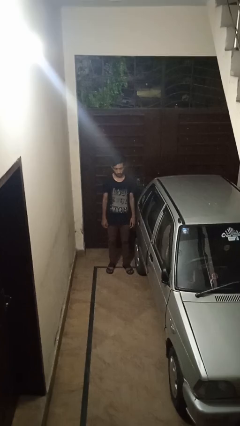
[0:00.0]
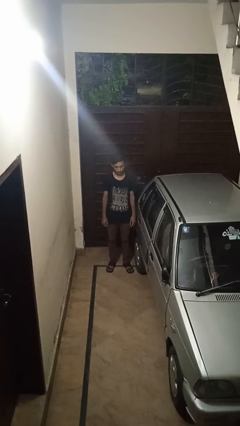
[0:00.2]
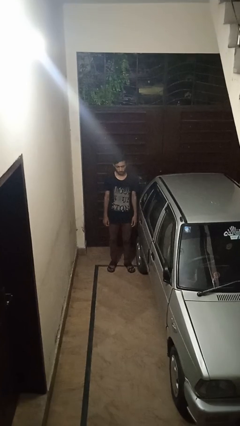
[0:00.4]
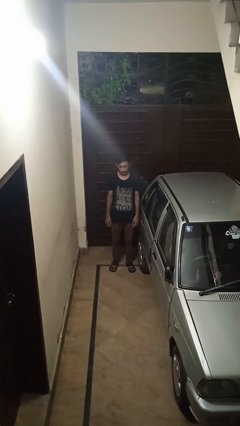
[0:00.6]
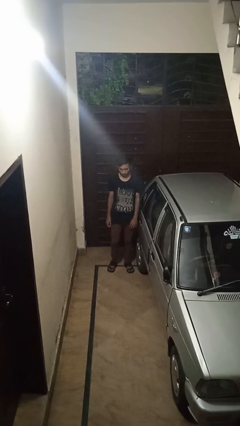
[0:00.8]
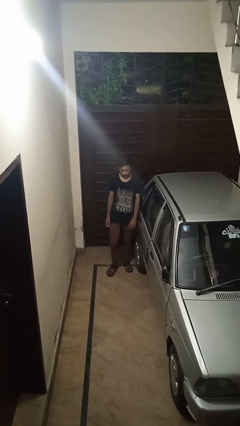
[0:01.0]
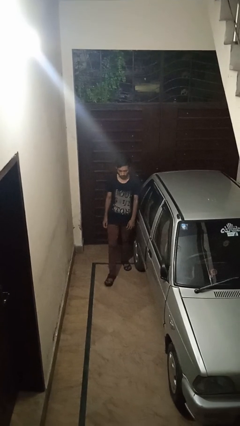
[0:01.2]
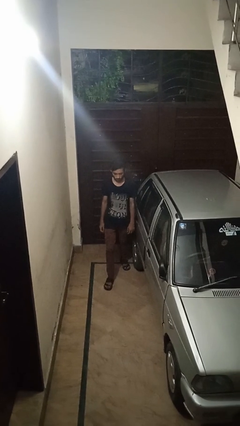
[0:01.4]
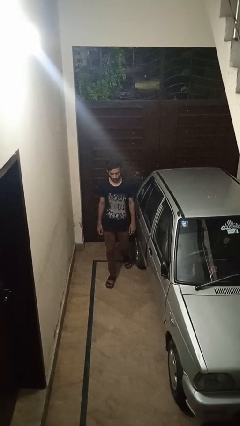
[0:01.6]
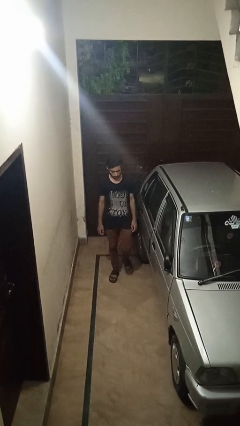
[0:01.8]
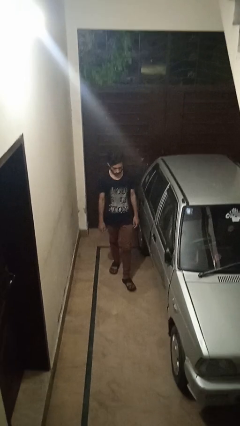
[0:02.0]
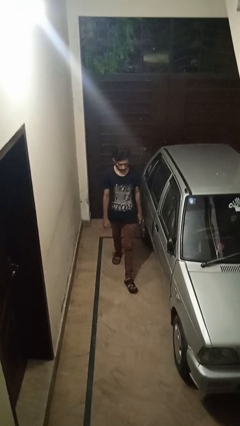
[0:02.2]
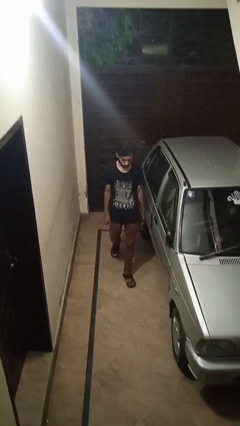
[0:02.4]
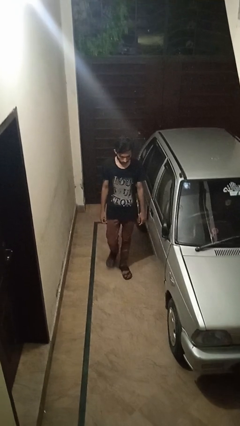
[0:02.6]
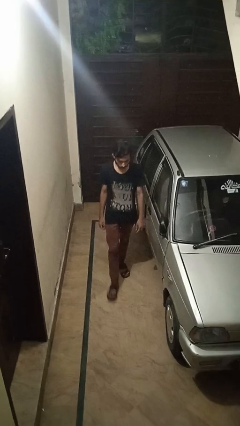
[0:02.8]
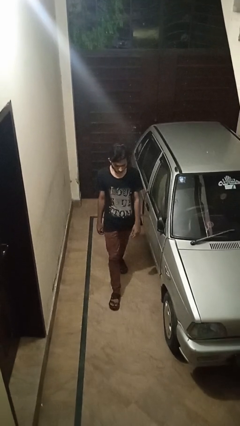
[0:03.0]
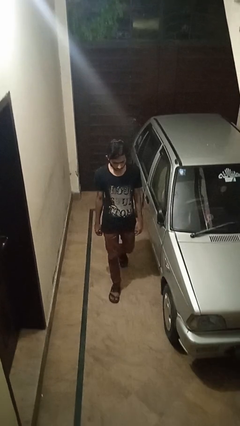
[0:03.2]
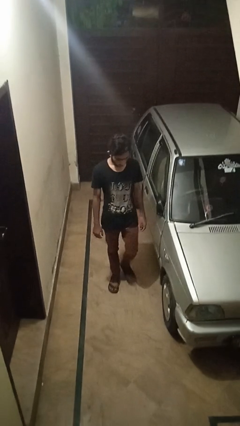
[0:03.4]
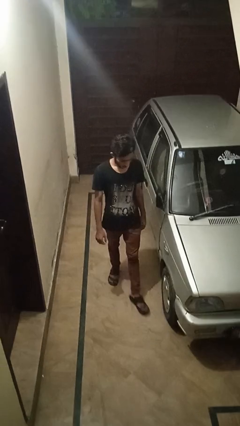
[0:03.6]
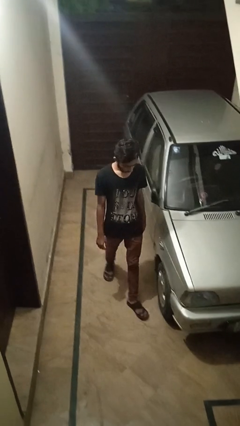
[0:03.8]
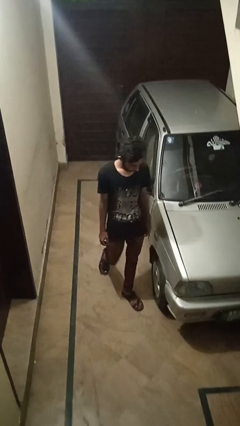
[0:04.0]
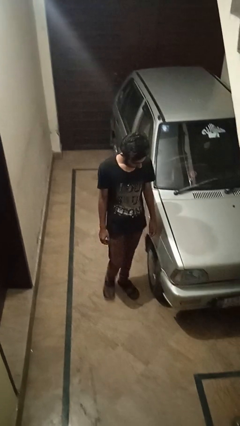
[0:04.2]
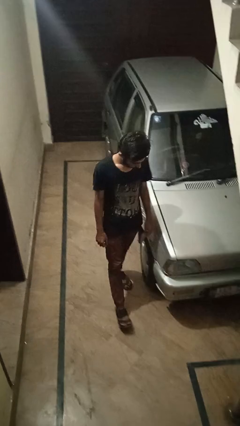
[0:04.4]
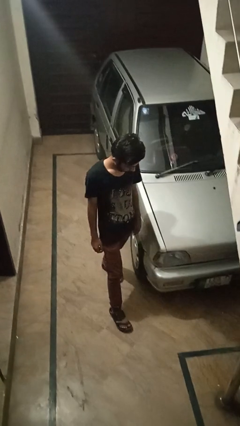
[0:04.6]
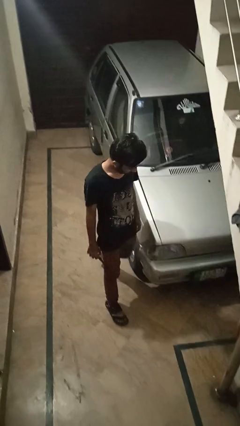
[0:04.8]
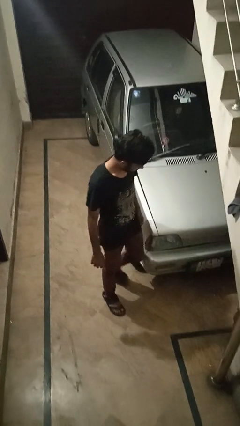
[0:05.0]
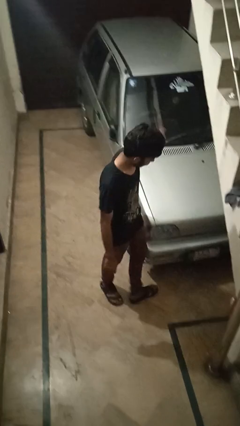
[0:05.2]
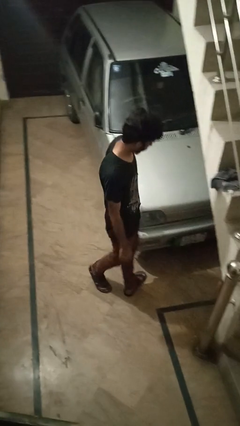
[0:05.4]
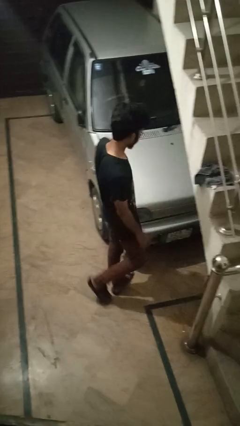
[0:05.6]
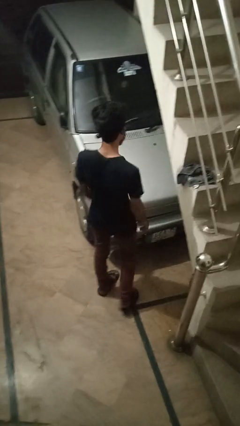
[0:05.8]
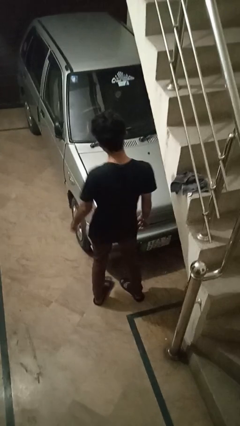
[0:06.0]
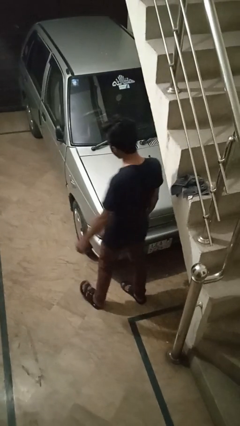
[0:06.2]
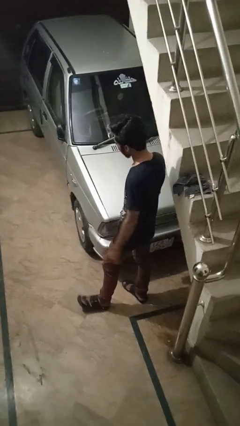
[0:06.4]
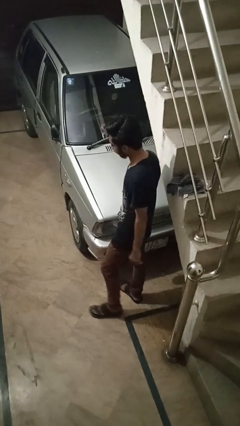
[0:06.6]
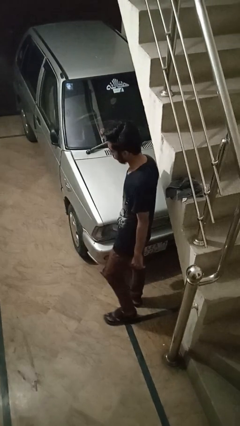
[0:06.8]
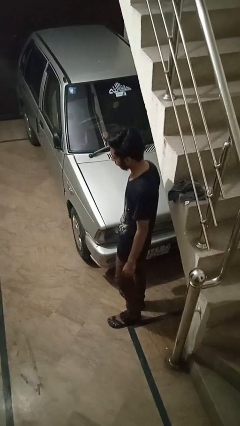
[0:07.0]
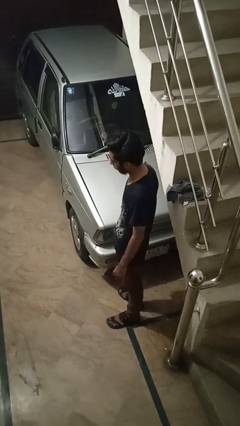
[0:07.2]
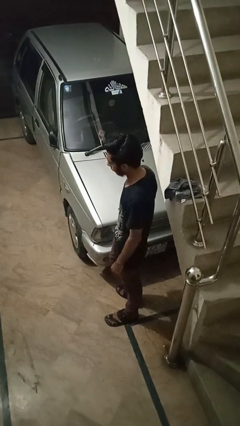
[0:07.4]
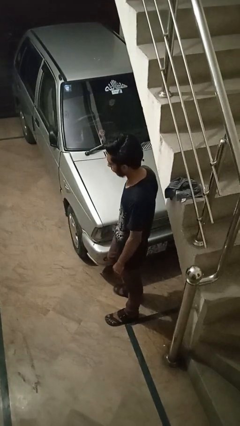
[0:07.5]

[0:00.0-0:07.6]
person walks around car

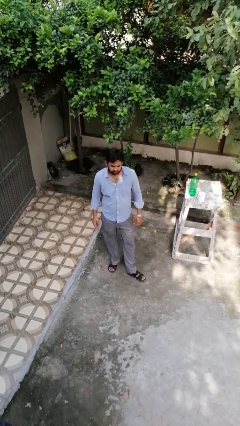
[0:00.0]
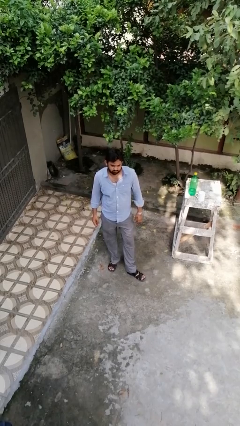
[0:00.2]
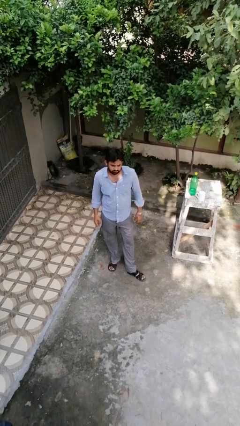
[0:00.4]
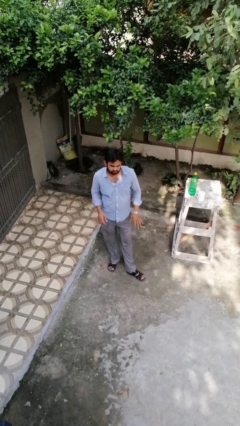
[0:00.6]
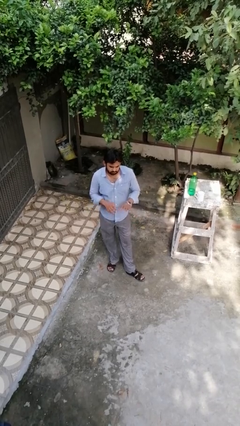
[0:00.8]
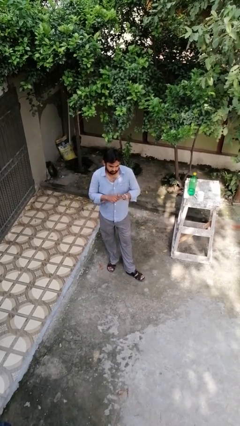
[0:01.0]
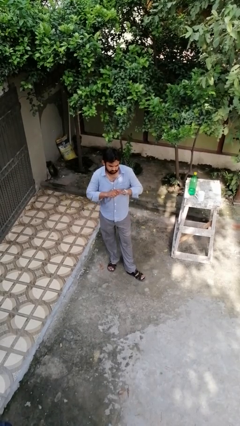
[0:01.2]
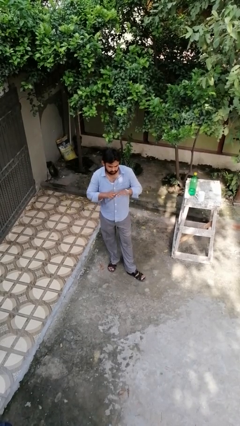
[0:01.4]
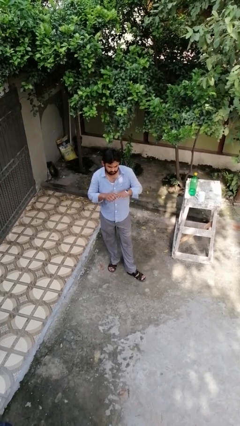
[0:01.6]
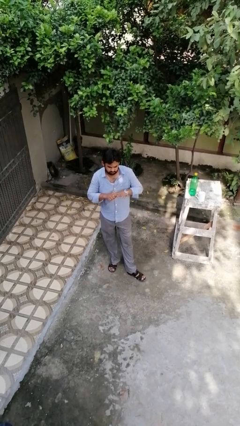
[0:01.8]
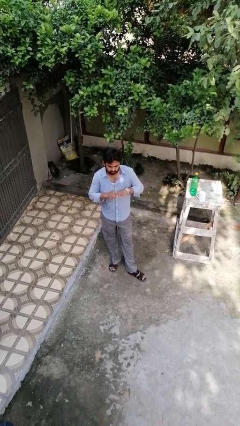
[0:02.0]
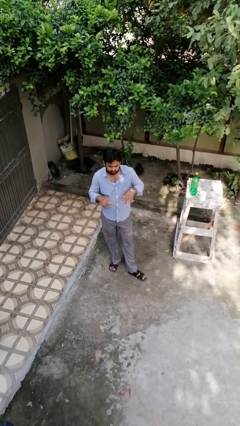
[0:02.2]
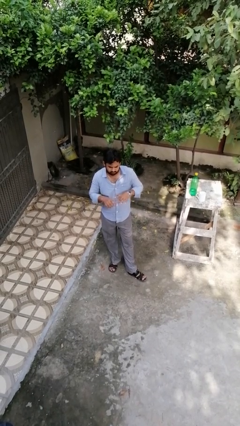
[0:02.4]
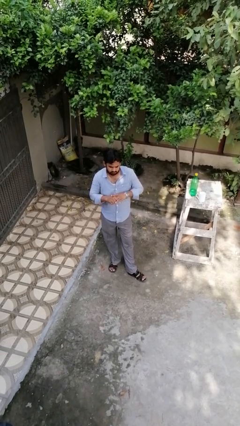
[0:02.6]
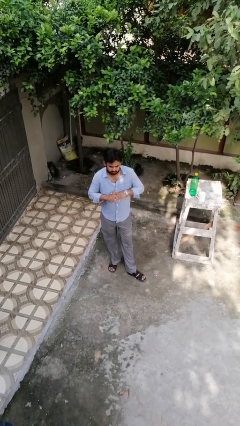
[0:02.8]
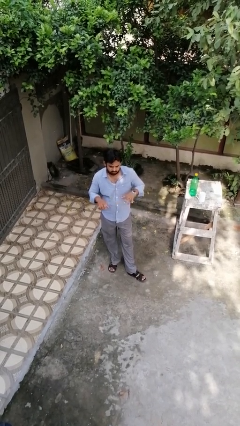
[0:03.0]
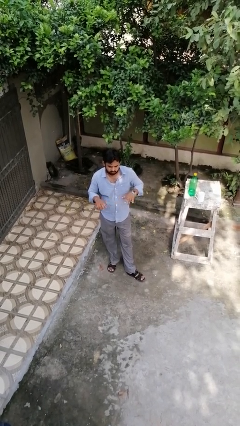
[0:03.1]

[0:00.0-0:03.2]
person snaps fingers

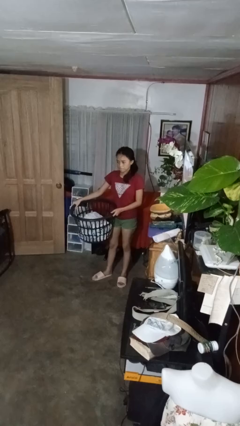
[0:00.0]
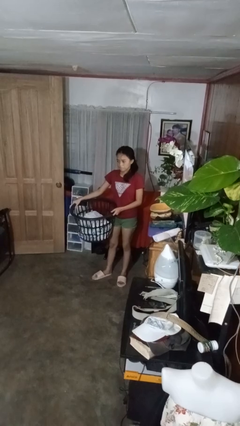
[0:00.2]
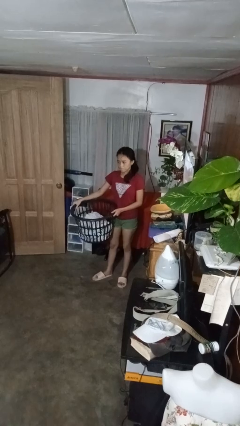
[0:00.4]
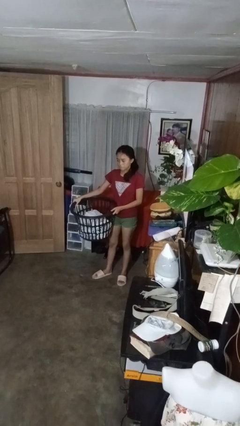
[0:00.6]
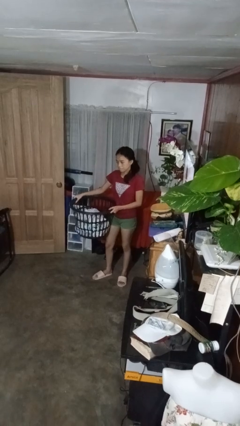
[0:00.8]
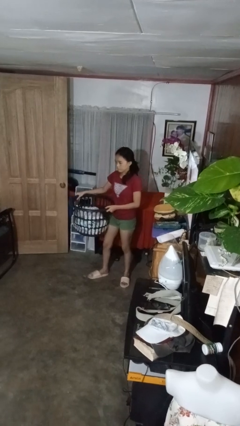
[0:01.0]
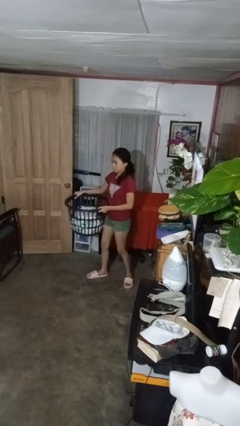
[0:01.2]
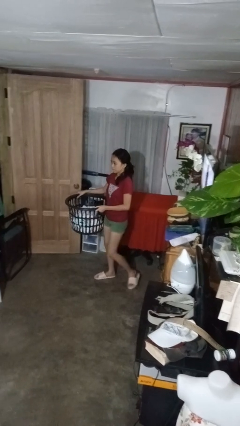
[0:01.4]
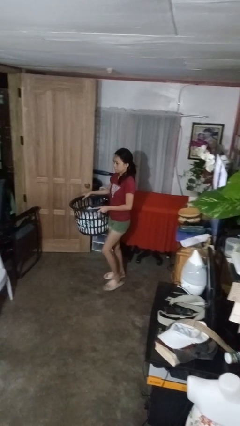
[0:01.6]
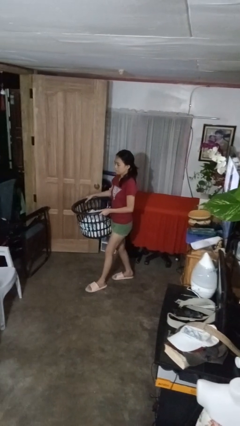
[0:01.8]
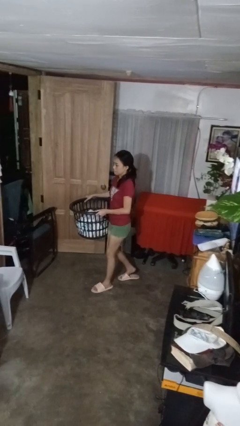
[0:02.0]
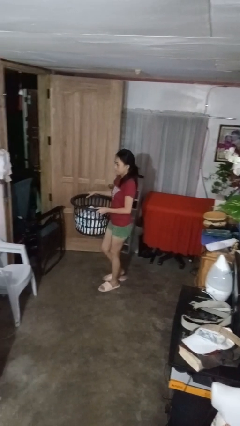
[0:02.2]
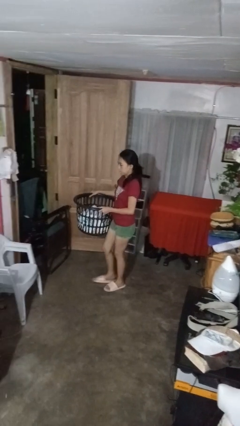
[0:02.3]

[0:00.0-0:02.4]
person carries laundry basket

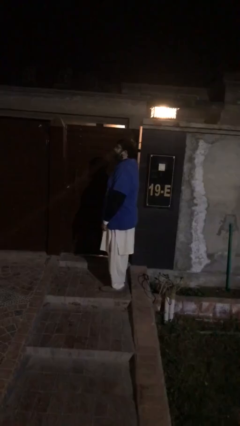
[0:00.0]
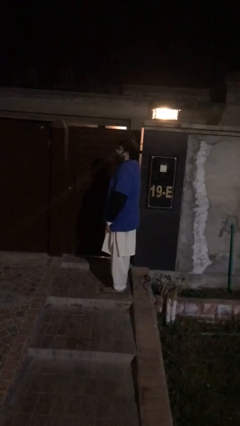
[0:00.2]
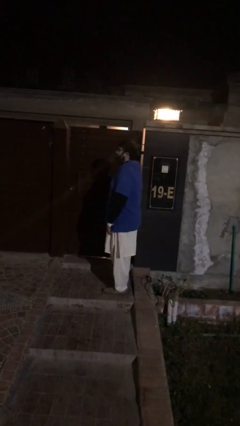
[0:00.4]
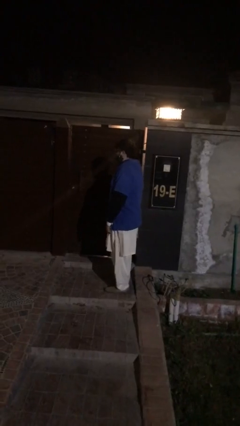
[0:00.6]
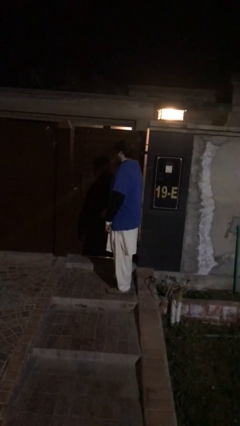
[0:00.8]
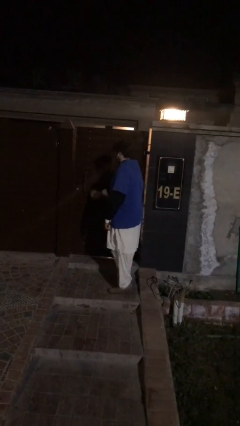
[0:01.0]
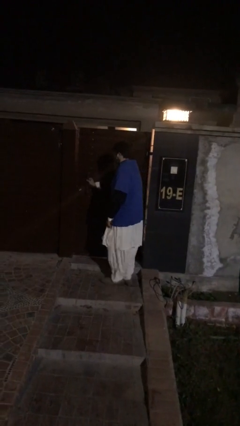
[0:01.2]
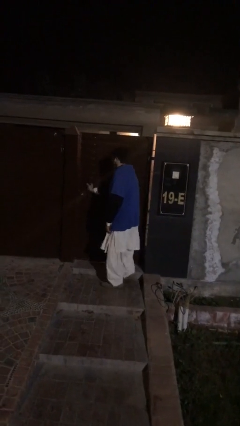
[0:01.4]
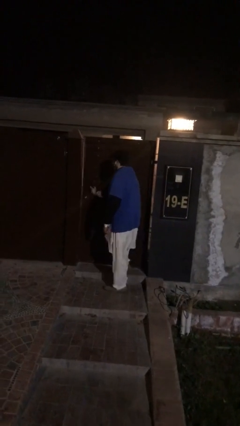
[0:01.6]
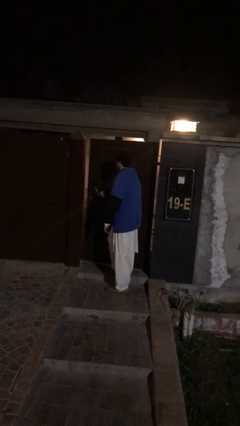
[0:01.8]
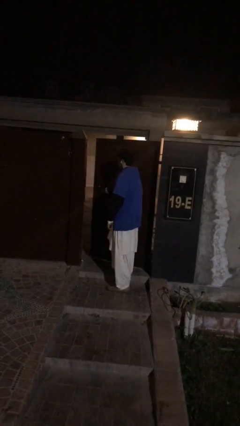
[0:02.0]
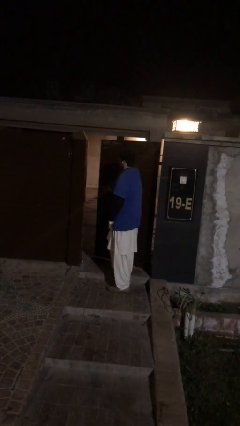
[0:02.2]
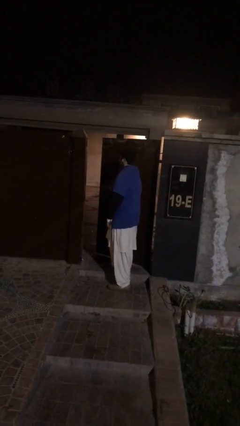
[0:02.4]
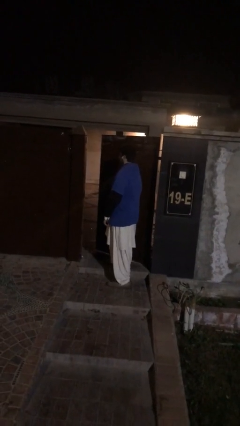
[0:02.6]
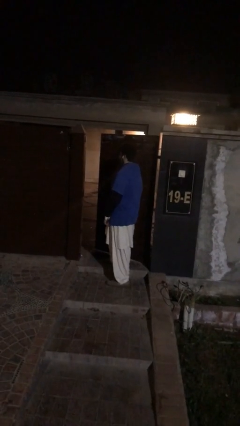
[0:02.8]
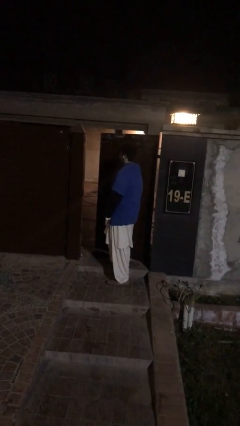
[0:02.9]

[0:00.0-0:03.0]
person opens facility door

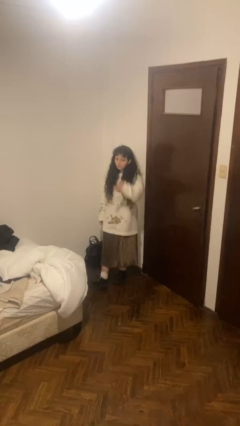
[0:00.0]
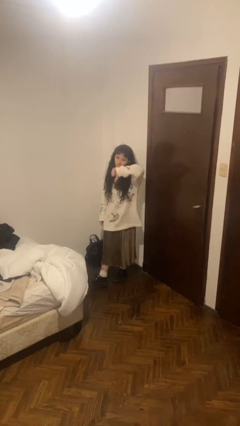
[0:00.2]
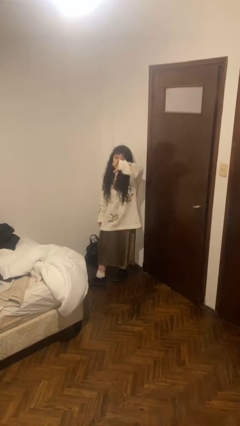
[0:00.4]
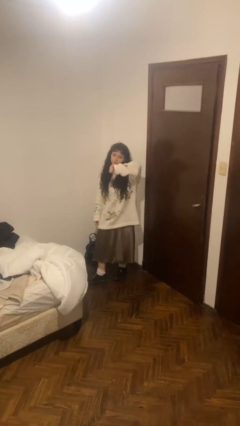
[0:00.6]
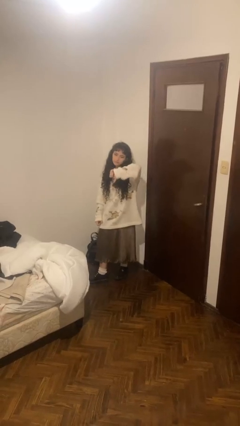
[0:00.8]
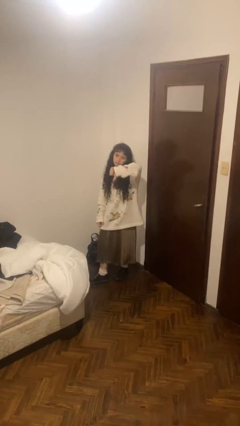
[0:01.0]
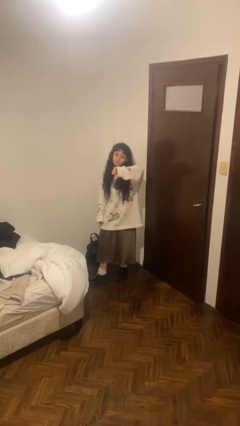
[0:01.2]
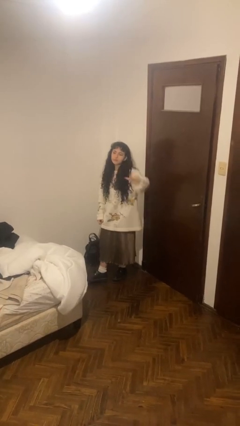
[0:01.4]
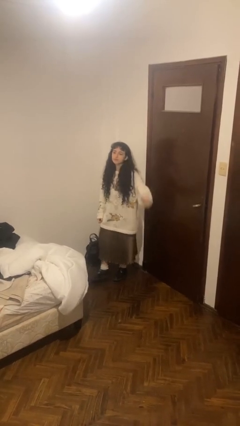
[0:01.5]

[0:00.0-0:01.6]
person gestures thumbs down
